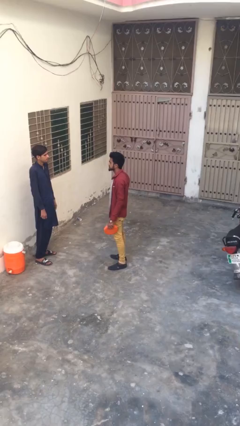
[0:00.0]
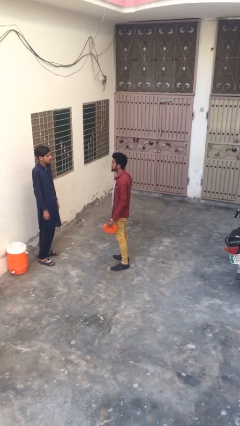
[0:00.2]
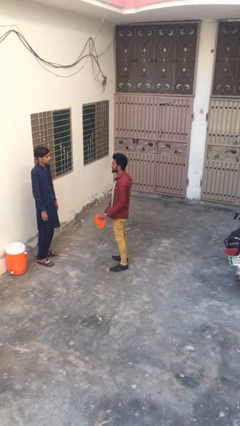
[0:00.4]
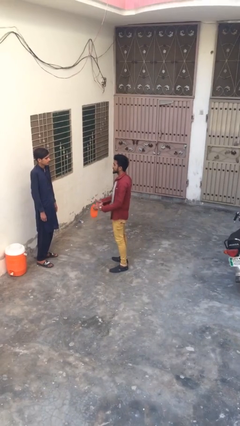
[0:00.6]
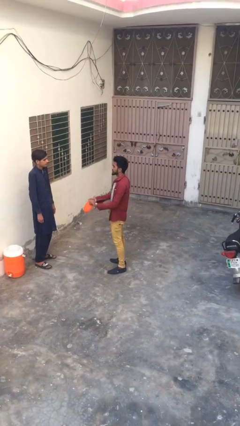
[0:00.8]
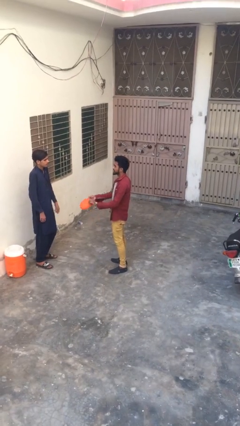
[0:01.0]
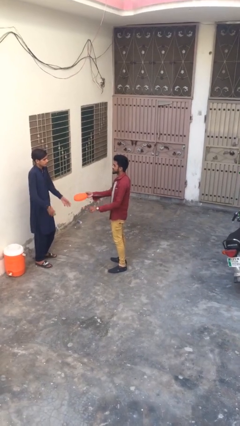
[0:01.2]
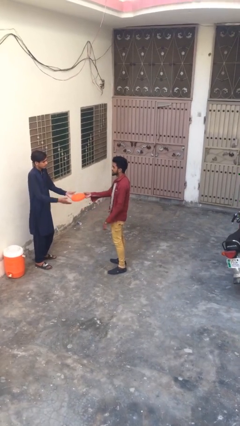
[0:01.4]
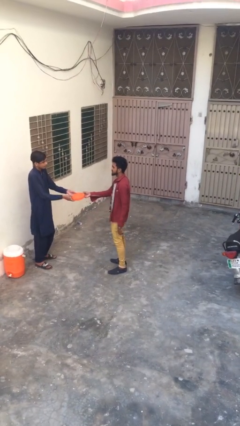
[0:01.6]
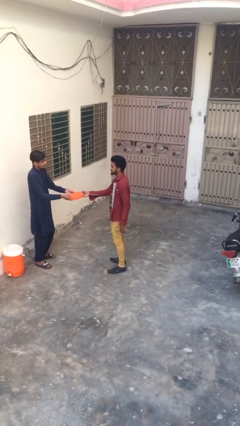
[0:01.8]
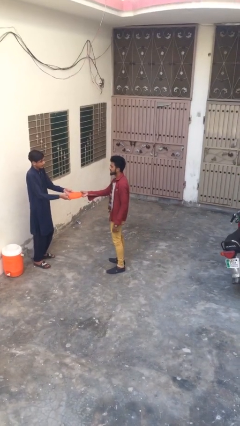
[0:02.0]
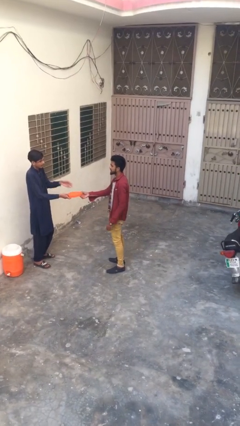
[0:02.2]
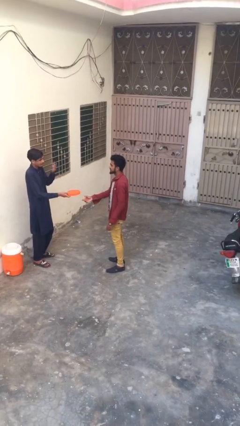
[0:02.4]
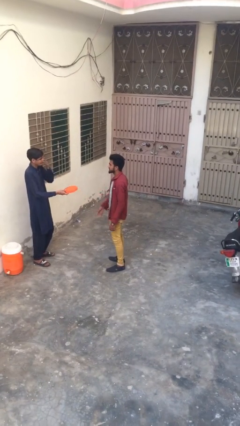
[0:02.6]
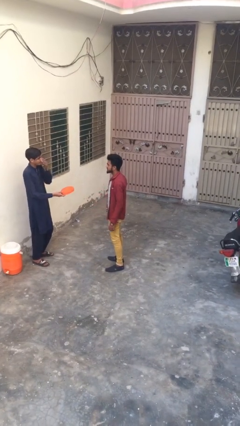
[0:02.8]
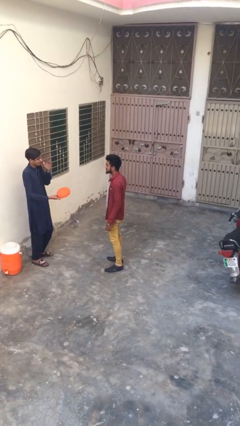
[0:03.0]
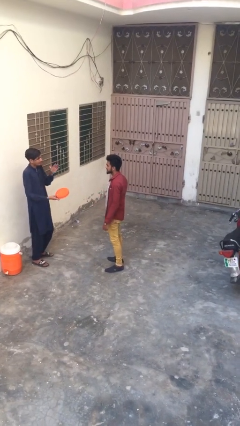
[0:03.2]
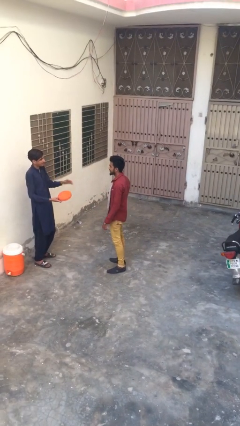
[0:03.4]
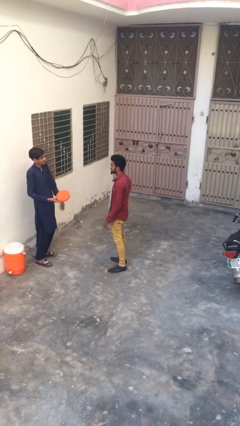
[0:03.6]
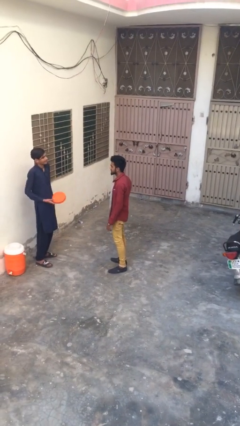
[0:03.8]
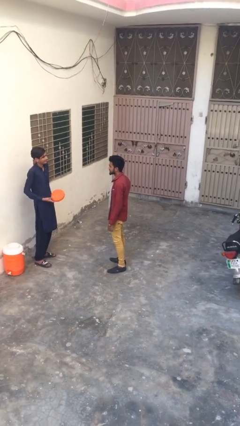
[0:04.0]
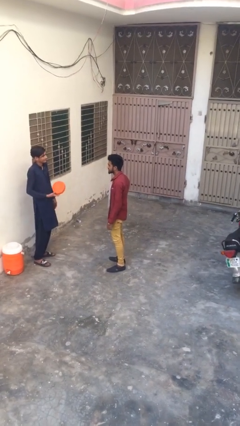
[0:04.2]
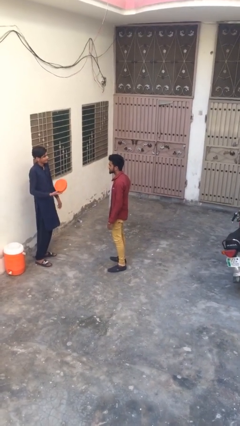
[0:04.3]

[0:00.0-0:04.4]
person transfers object to person

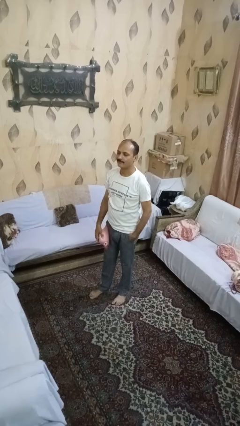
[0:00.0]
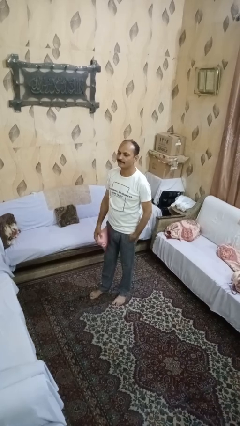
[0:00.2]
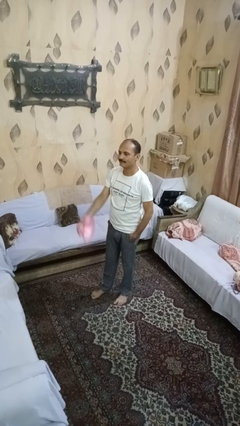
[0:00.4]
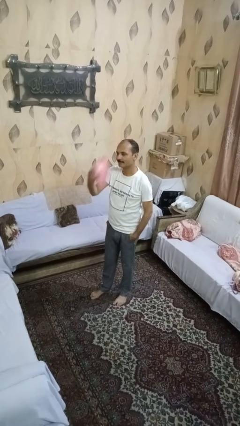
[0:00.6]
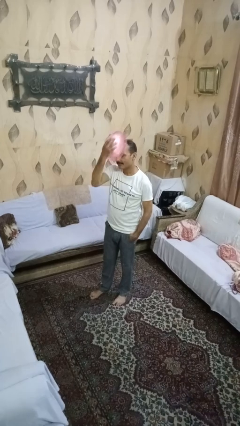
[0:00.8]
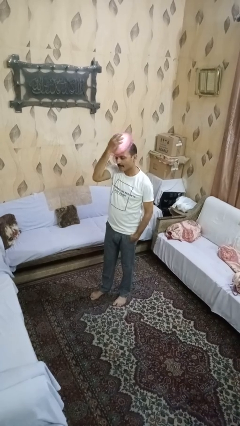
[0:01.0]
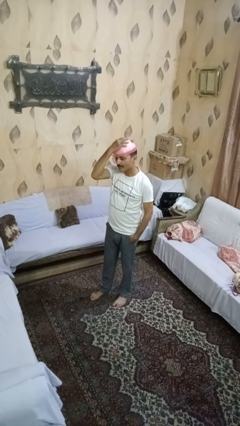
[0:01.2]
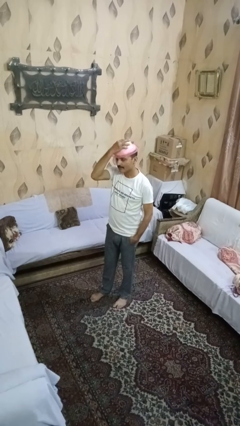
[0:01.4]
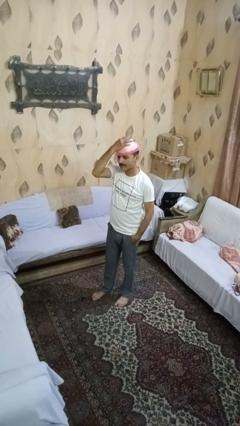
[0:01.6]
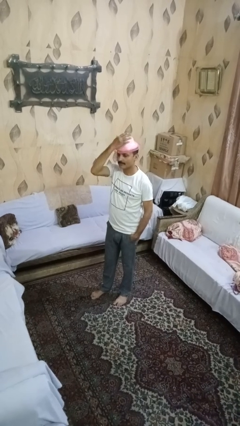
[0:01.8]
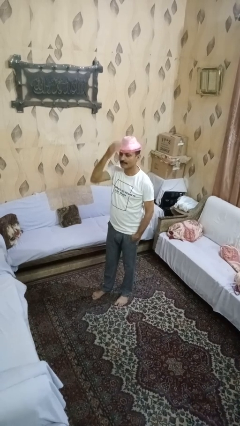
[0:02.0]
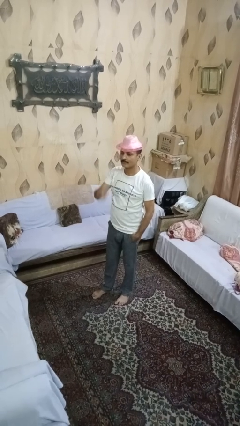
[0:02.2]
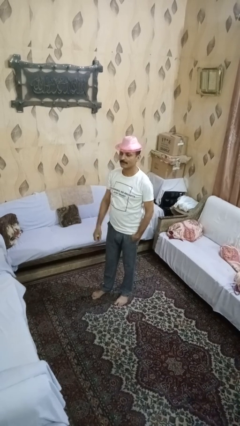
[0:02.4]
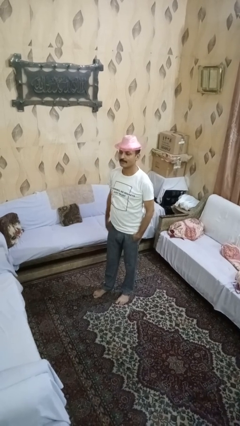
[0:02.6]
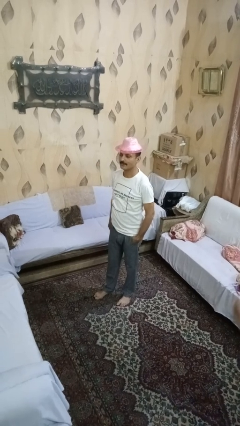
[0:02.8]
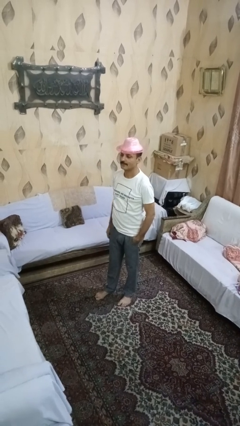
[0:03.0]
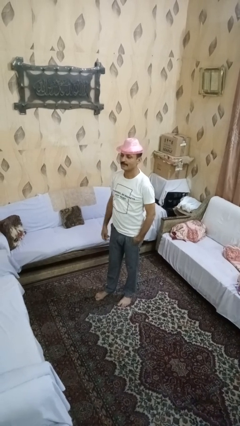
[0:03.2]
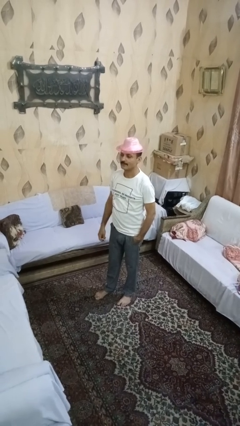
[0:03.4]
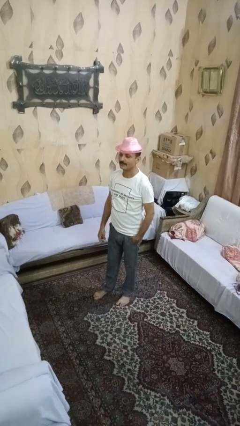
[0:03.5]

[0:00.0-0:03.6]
person puts on hat

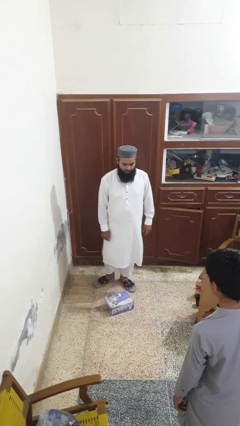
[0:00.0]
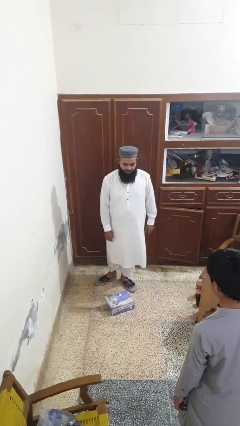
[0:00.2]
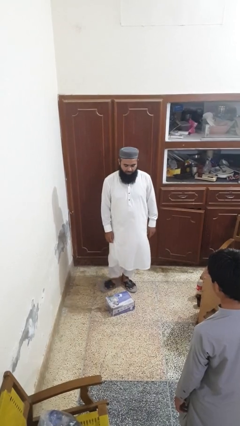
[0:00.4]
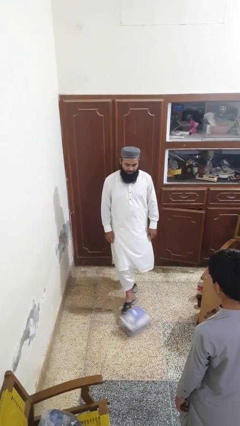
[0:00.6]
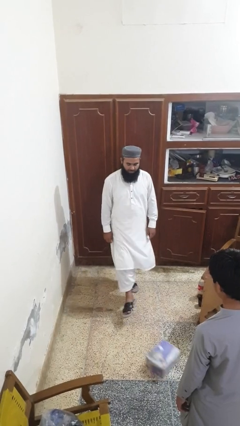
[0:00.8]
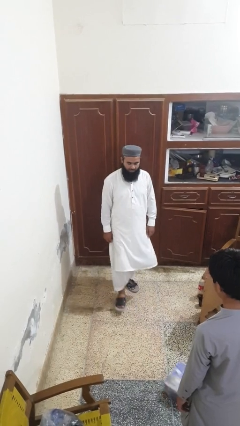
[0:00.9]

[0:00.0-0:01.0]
person kicks object to person

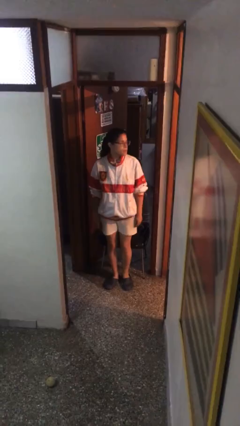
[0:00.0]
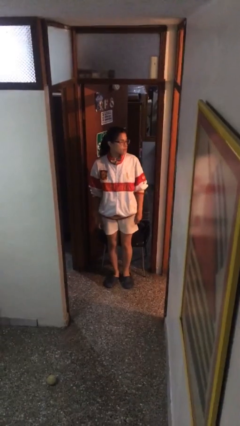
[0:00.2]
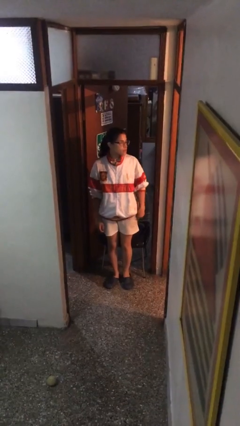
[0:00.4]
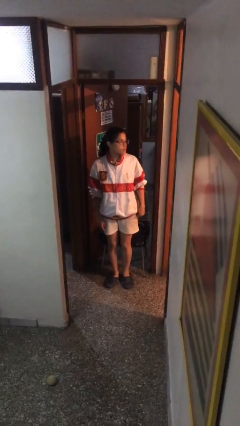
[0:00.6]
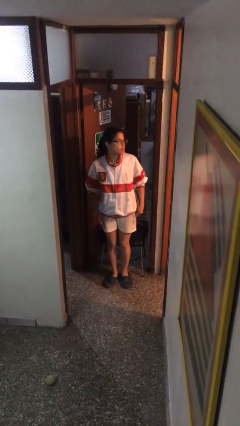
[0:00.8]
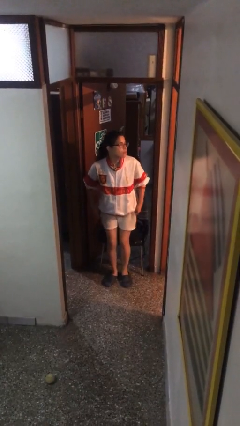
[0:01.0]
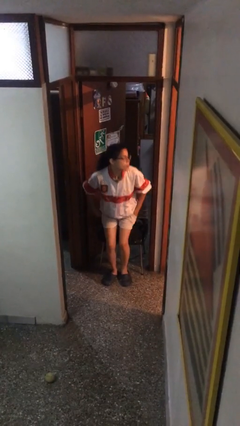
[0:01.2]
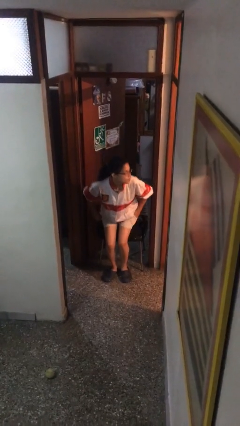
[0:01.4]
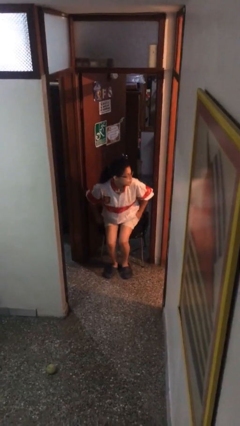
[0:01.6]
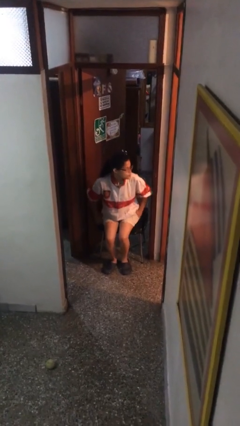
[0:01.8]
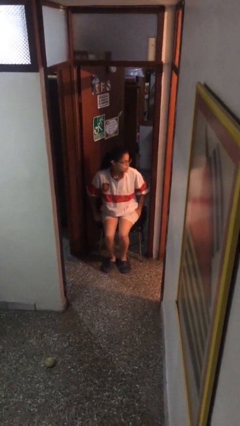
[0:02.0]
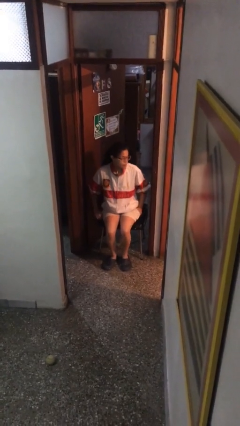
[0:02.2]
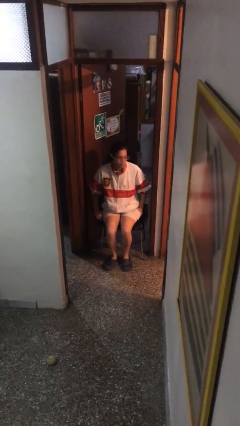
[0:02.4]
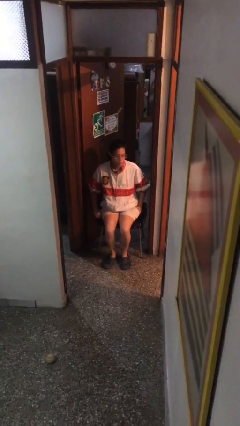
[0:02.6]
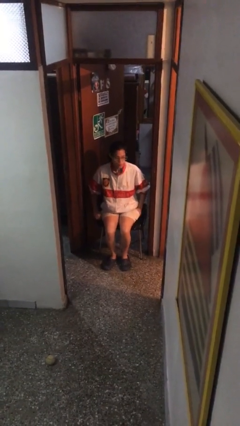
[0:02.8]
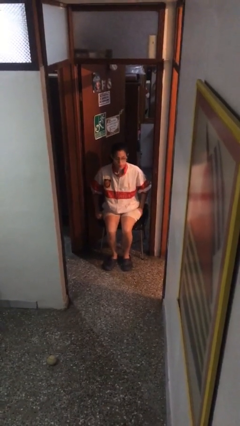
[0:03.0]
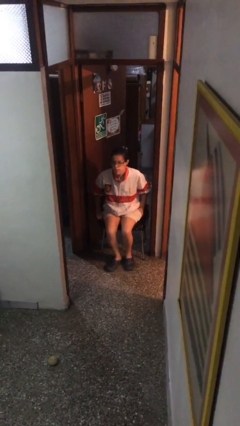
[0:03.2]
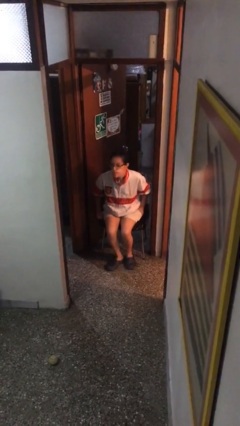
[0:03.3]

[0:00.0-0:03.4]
person sits down

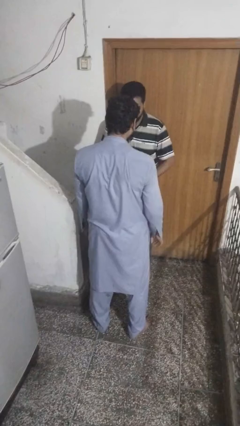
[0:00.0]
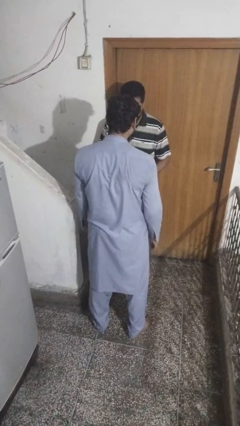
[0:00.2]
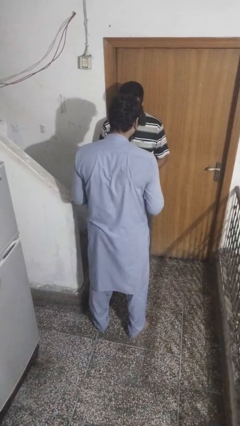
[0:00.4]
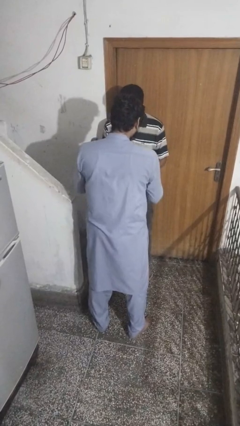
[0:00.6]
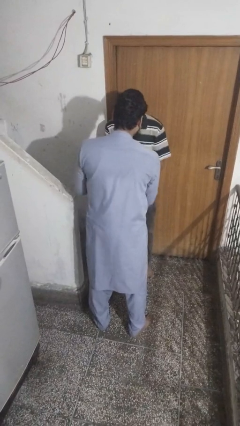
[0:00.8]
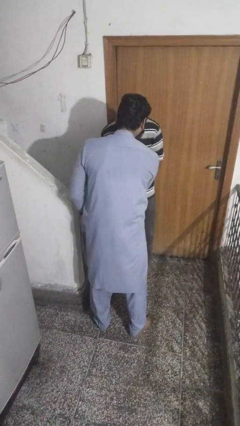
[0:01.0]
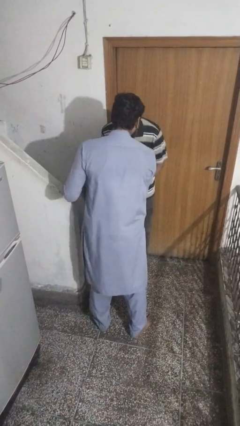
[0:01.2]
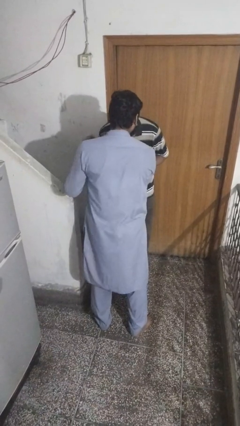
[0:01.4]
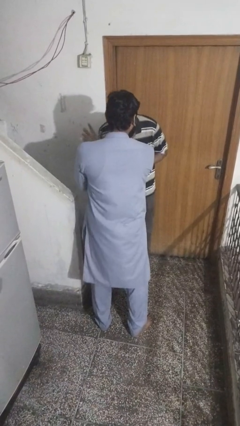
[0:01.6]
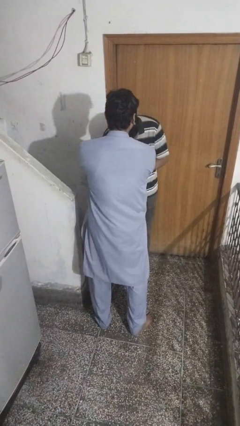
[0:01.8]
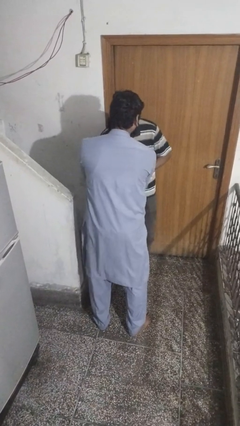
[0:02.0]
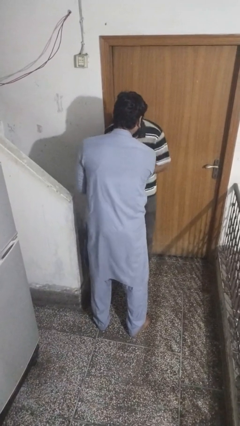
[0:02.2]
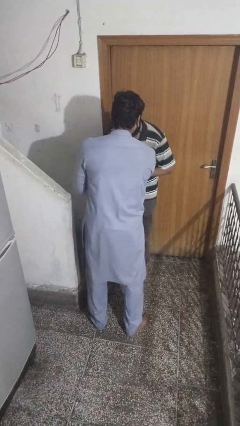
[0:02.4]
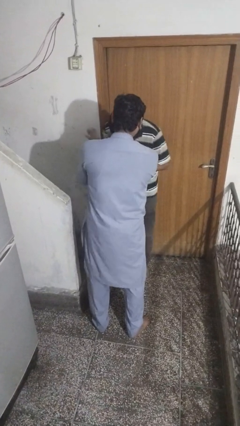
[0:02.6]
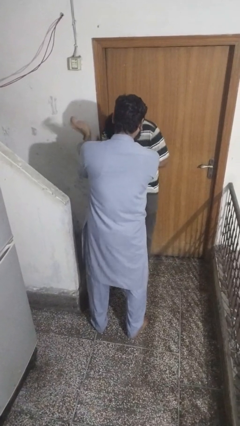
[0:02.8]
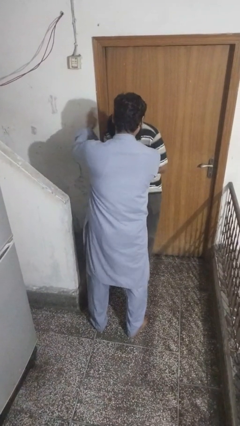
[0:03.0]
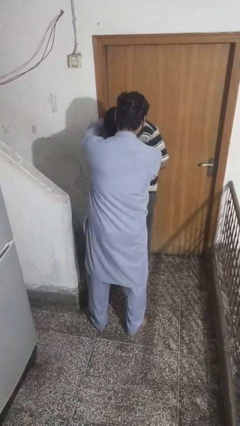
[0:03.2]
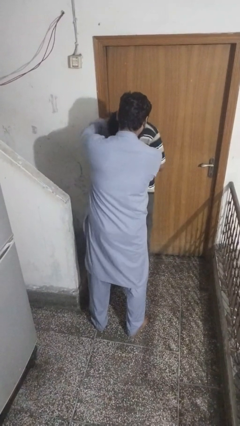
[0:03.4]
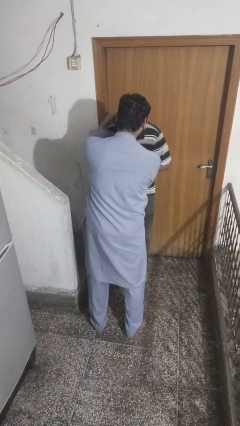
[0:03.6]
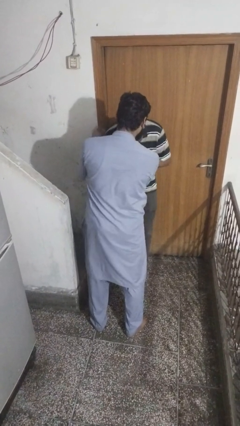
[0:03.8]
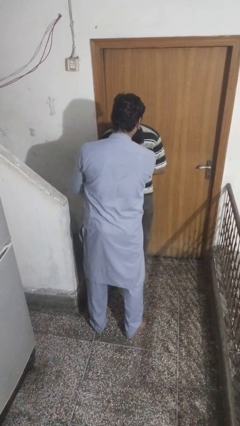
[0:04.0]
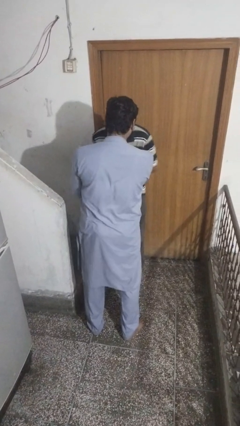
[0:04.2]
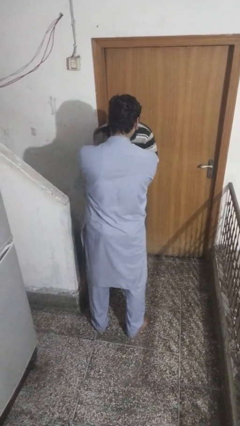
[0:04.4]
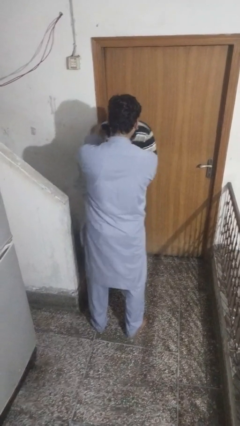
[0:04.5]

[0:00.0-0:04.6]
person tickles person
